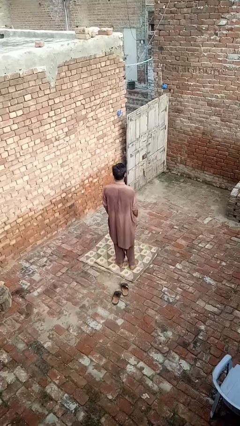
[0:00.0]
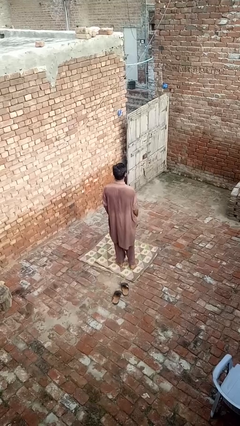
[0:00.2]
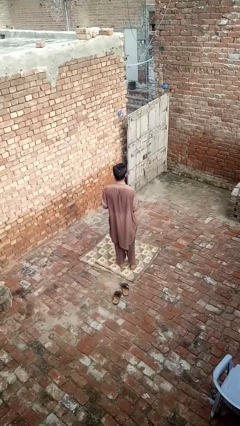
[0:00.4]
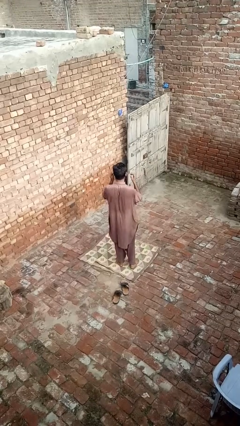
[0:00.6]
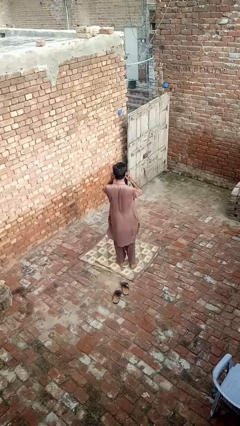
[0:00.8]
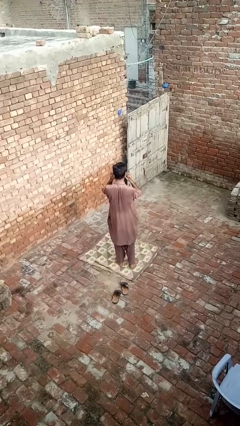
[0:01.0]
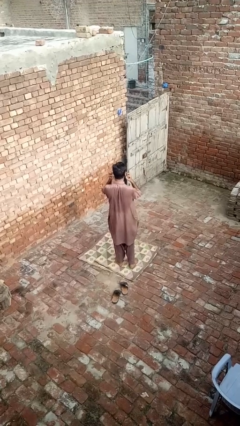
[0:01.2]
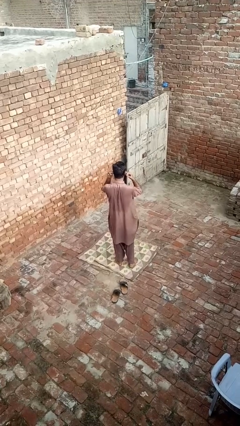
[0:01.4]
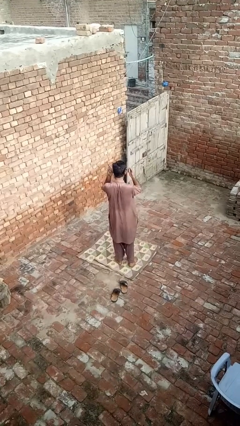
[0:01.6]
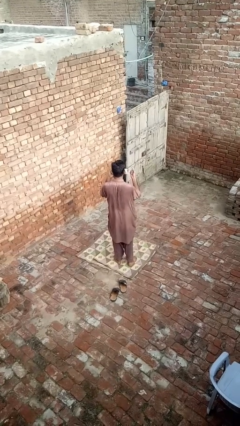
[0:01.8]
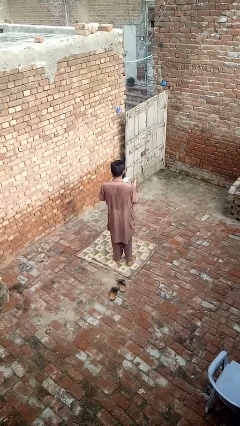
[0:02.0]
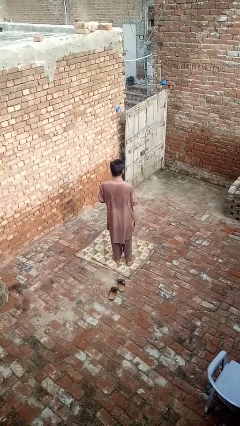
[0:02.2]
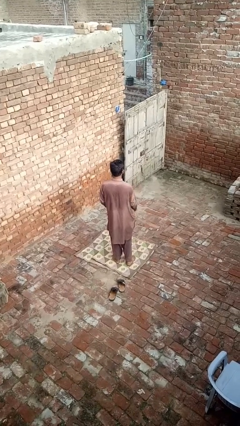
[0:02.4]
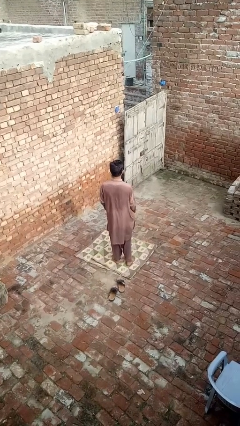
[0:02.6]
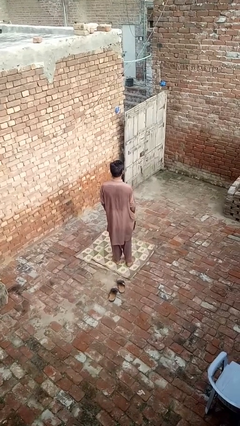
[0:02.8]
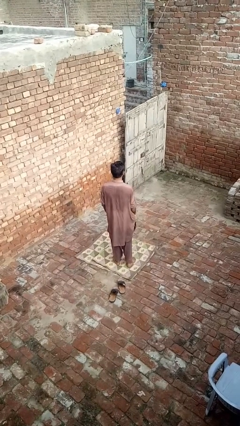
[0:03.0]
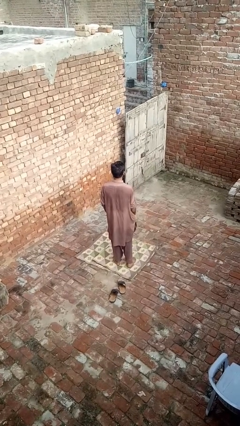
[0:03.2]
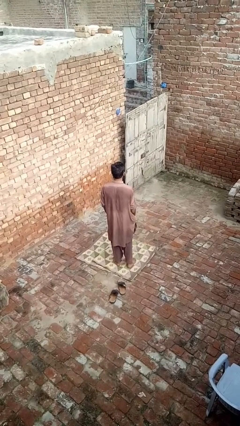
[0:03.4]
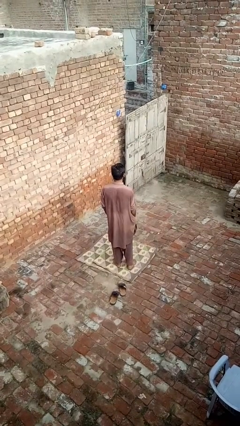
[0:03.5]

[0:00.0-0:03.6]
person takes off facemask

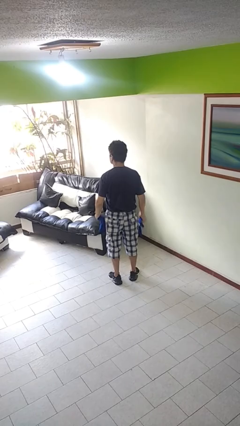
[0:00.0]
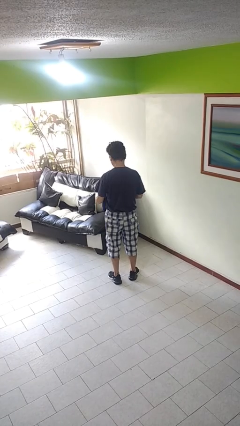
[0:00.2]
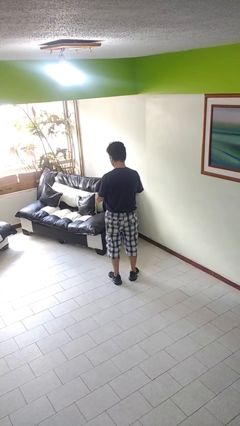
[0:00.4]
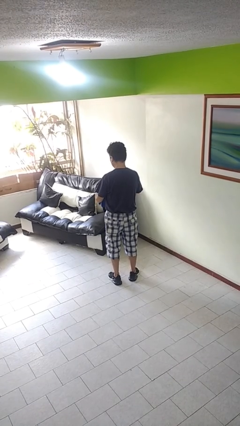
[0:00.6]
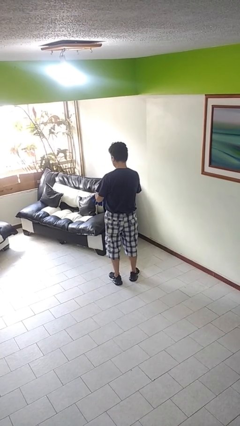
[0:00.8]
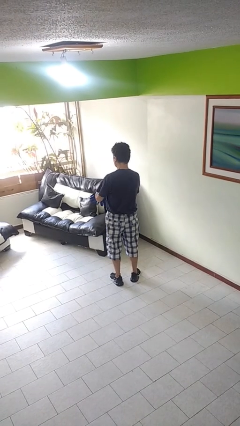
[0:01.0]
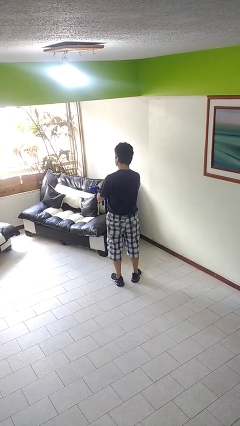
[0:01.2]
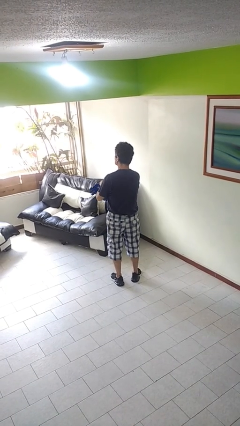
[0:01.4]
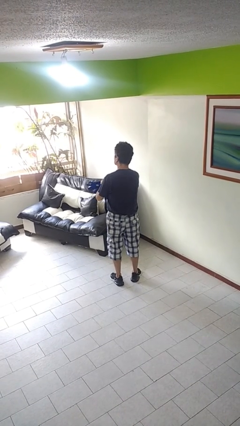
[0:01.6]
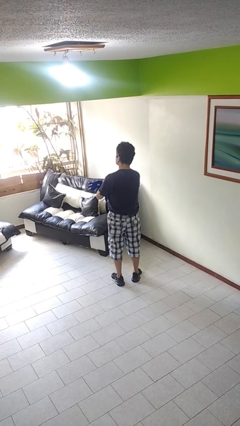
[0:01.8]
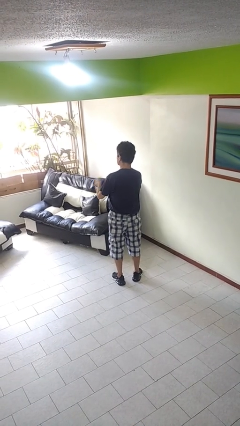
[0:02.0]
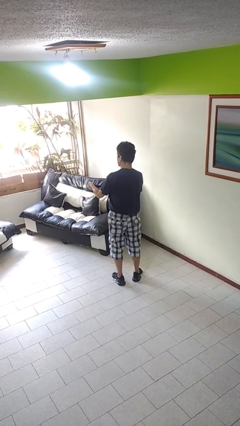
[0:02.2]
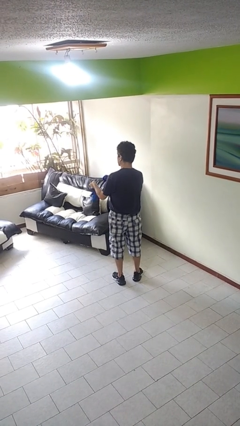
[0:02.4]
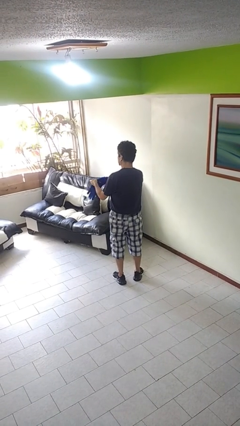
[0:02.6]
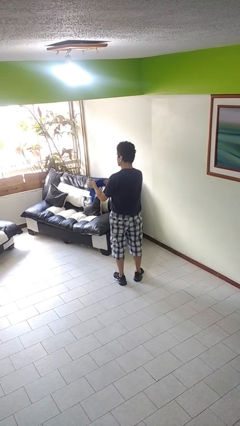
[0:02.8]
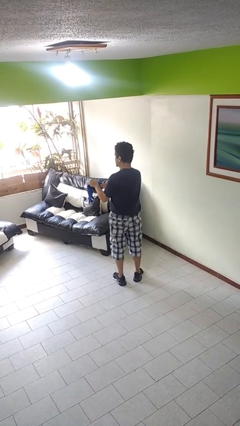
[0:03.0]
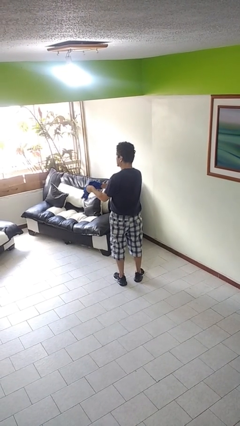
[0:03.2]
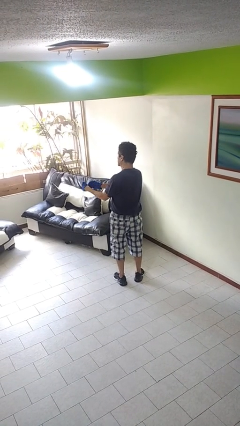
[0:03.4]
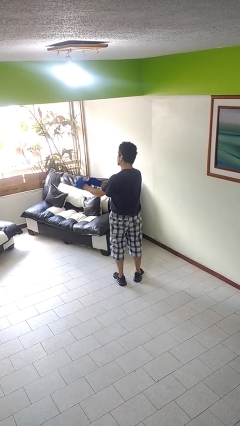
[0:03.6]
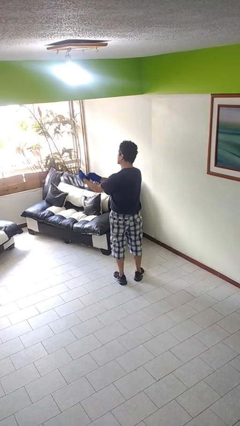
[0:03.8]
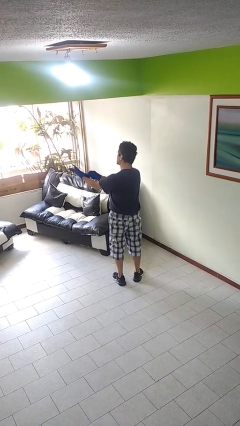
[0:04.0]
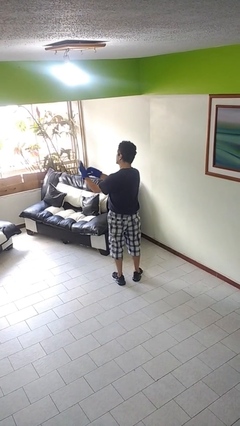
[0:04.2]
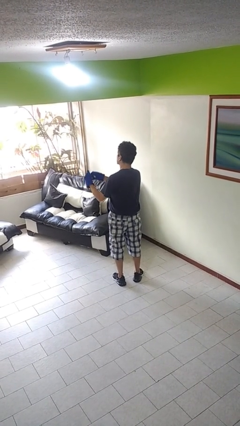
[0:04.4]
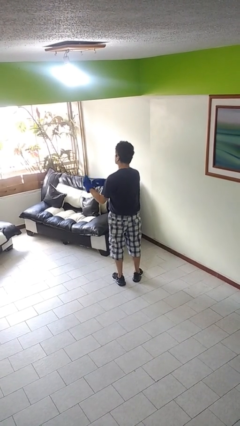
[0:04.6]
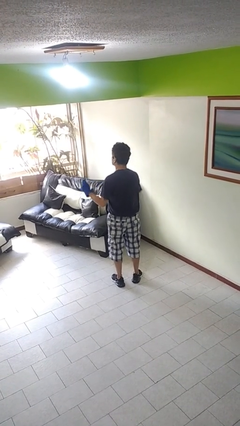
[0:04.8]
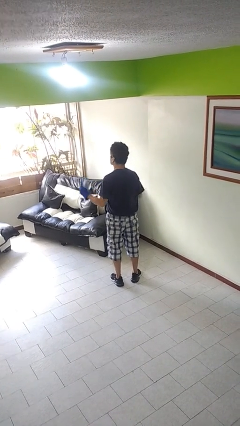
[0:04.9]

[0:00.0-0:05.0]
person puts on gloves

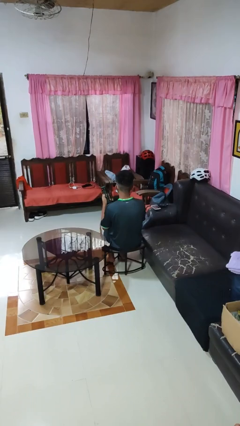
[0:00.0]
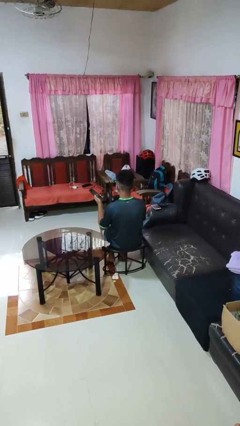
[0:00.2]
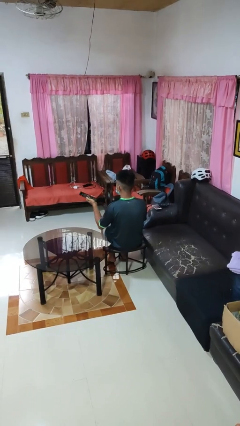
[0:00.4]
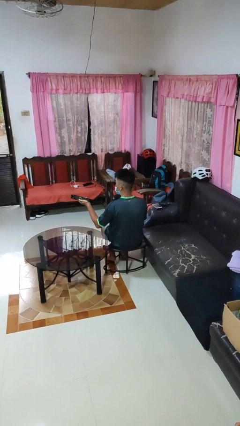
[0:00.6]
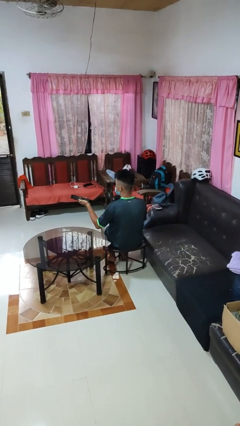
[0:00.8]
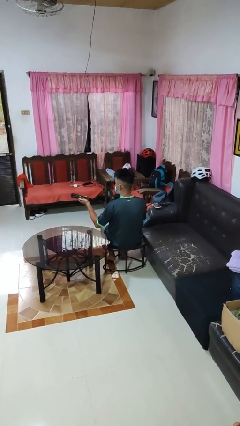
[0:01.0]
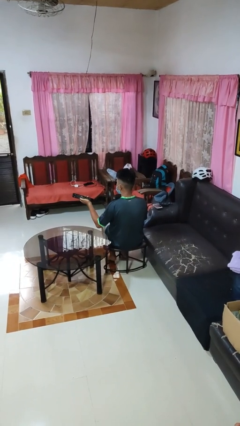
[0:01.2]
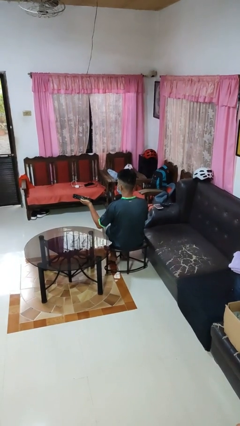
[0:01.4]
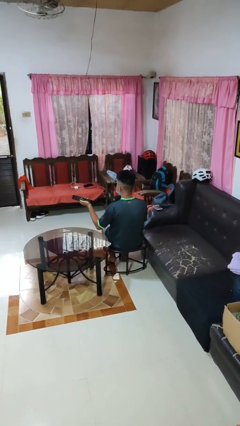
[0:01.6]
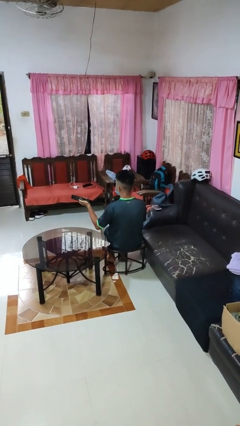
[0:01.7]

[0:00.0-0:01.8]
person uses television remote

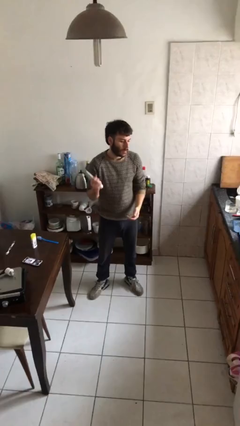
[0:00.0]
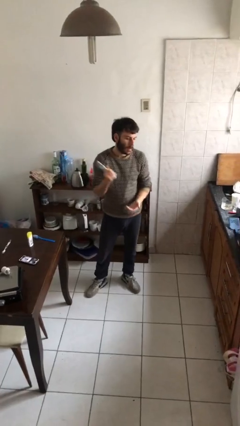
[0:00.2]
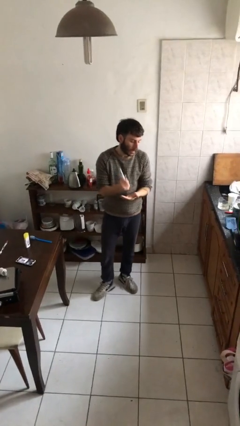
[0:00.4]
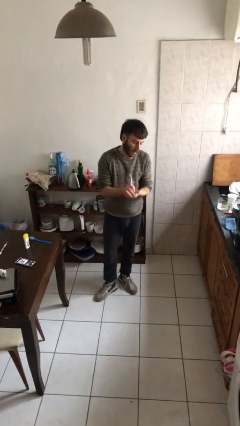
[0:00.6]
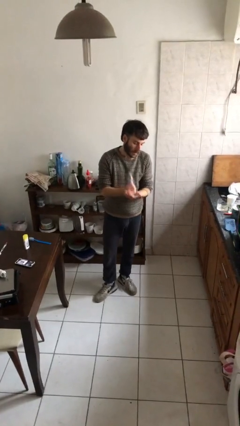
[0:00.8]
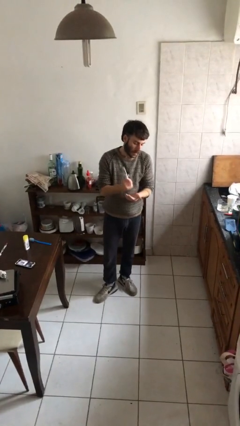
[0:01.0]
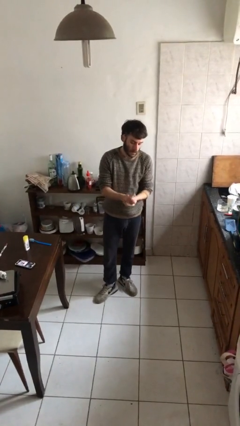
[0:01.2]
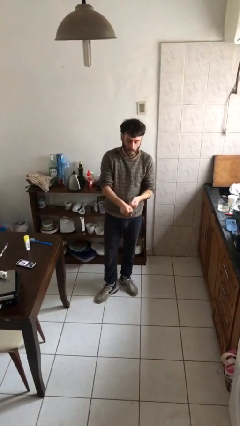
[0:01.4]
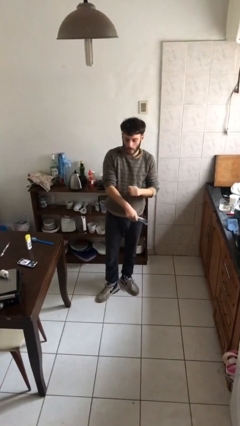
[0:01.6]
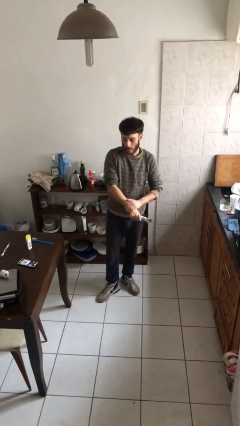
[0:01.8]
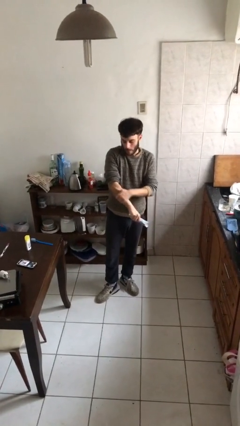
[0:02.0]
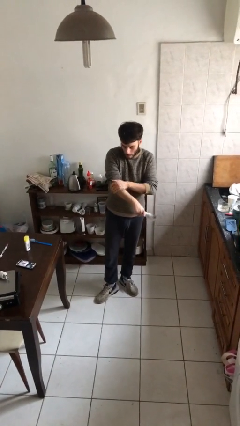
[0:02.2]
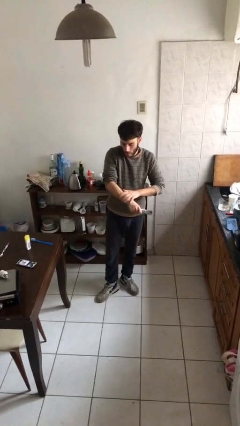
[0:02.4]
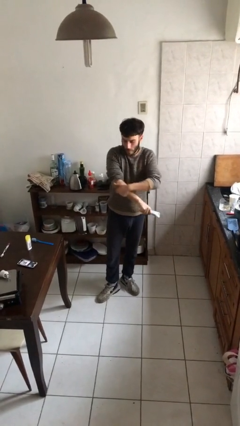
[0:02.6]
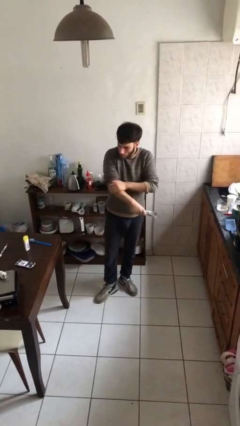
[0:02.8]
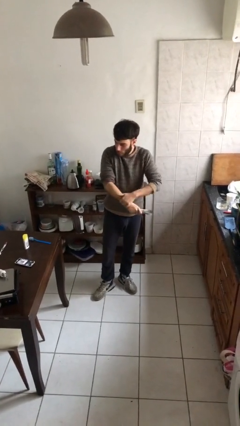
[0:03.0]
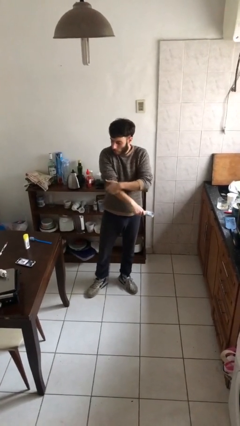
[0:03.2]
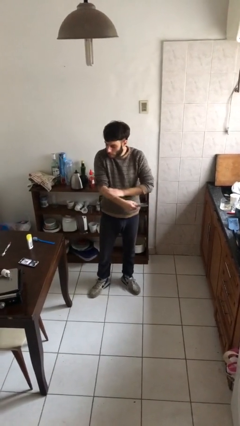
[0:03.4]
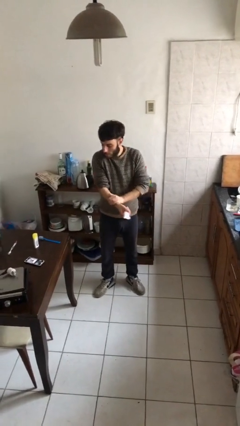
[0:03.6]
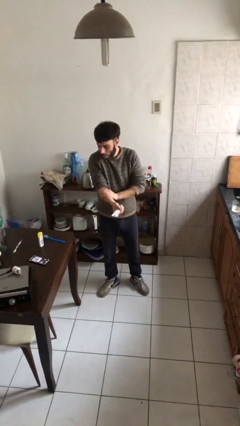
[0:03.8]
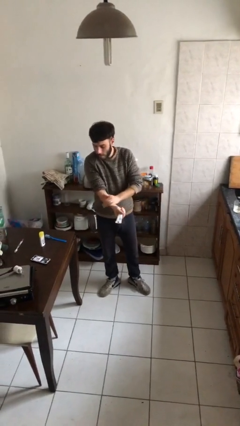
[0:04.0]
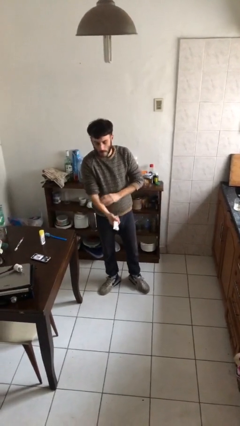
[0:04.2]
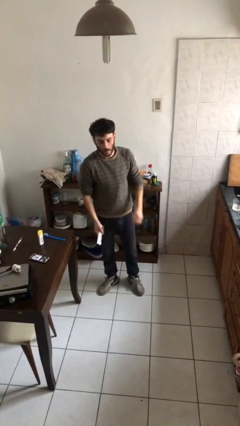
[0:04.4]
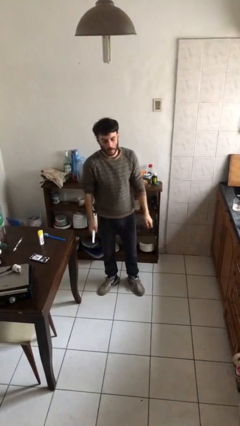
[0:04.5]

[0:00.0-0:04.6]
person applies sunscreen

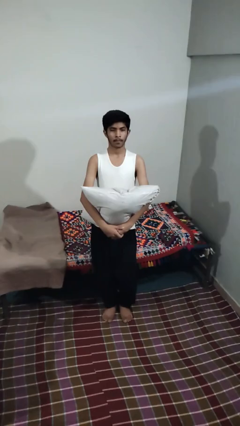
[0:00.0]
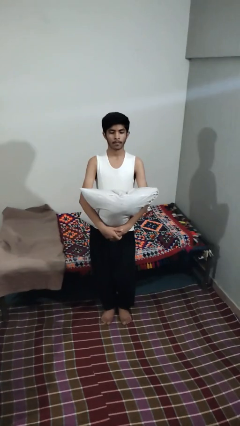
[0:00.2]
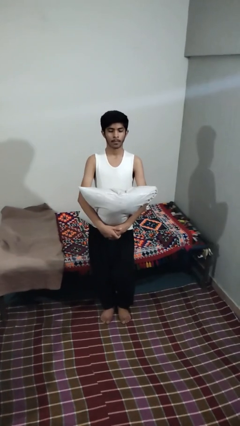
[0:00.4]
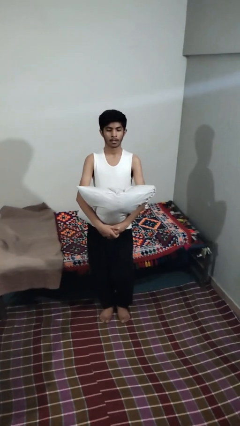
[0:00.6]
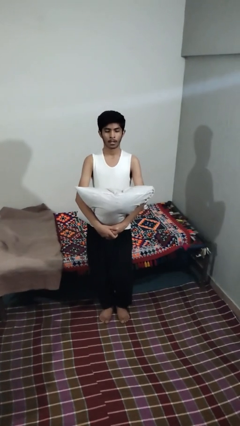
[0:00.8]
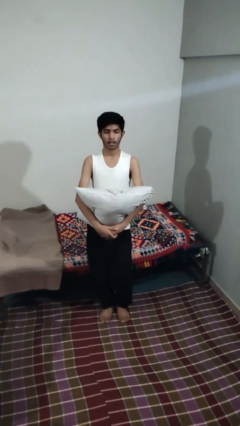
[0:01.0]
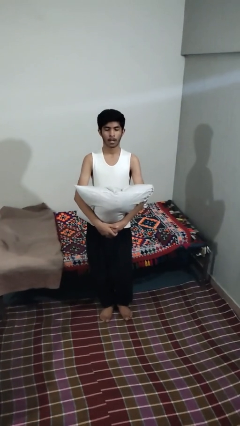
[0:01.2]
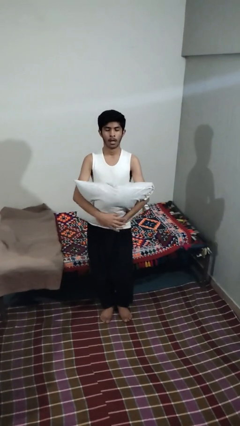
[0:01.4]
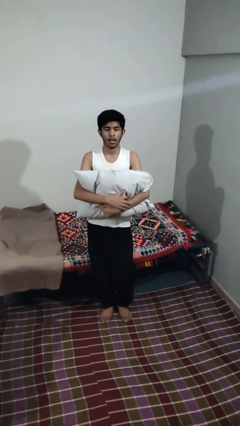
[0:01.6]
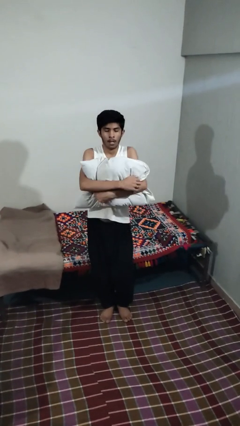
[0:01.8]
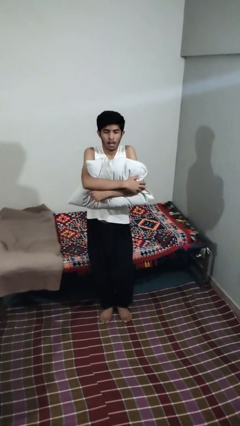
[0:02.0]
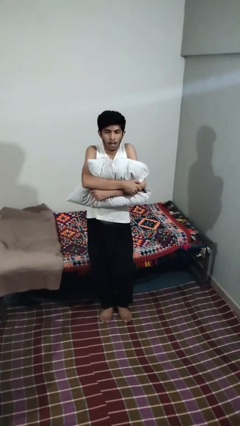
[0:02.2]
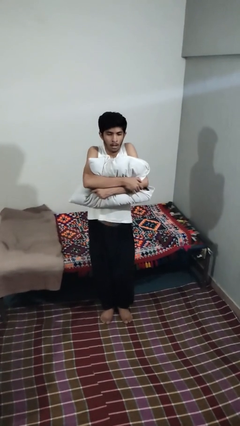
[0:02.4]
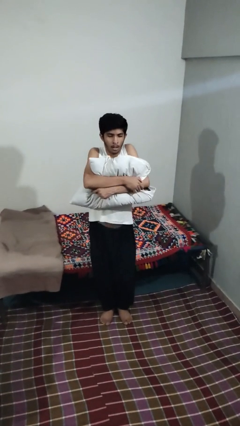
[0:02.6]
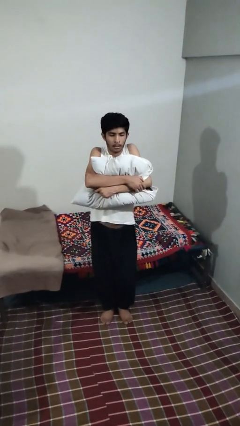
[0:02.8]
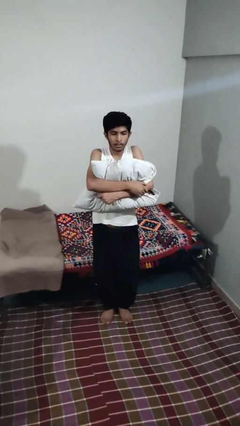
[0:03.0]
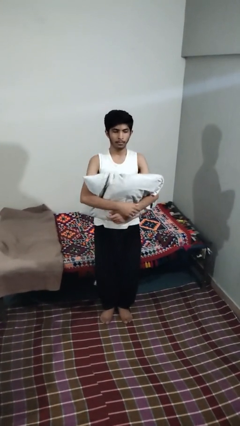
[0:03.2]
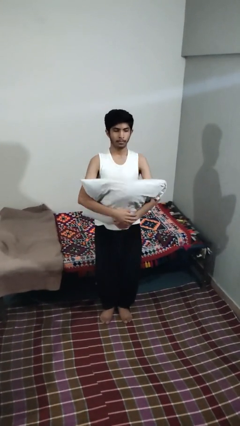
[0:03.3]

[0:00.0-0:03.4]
person squeezes object
